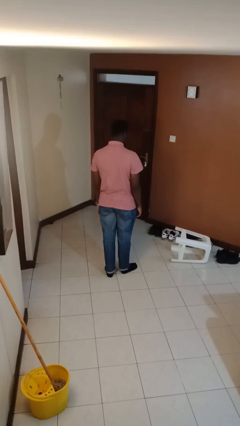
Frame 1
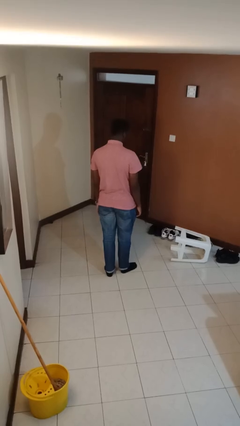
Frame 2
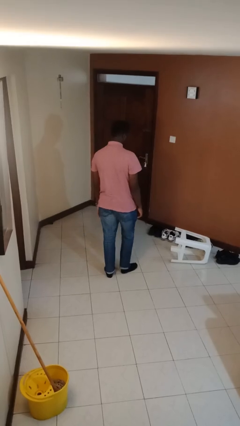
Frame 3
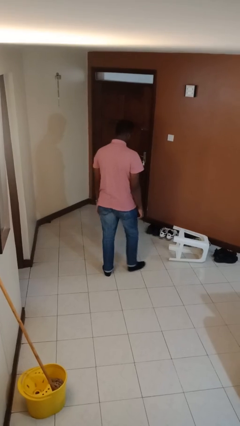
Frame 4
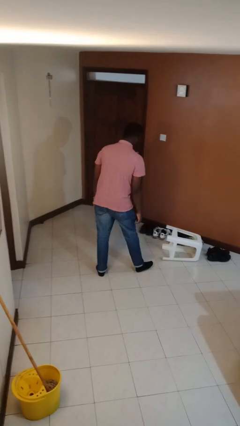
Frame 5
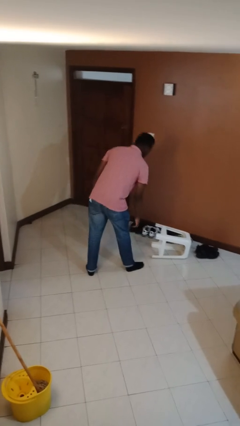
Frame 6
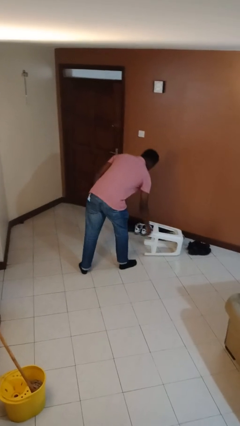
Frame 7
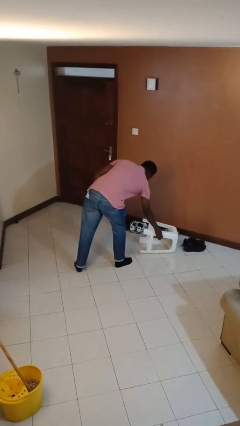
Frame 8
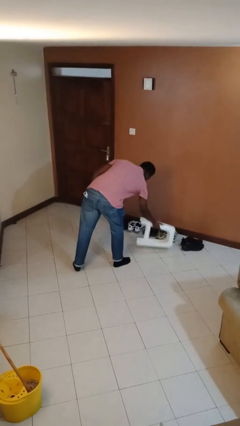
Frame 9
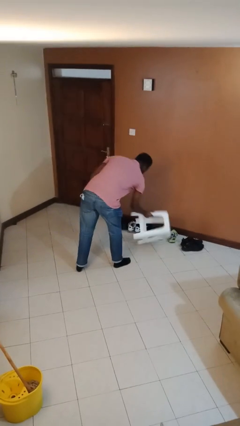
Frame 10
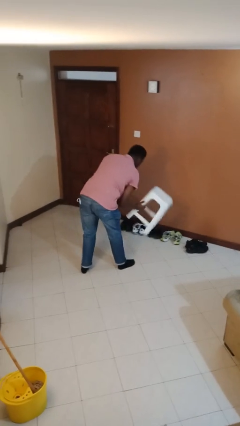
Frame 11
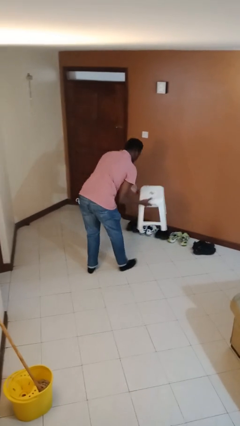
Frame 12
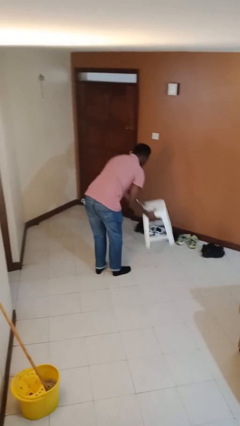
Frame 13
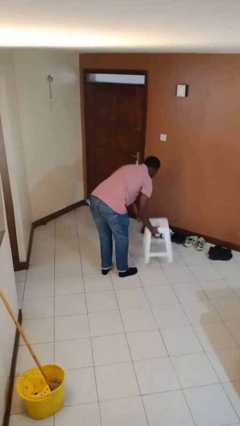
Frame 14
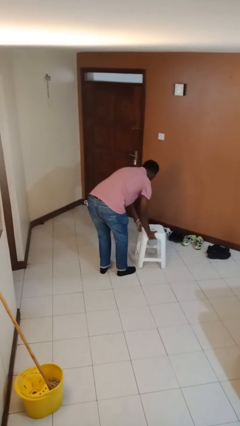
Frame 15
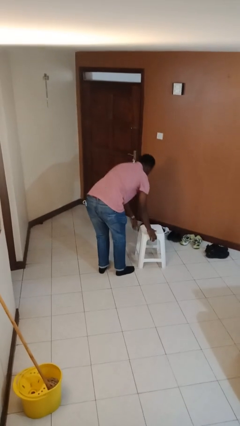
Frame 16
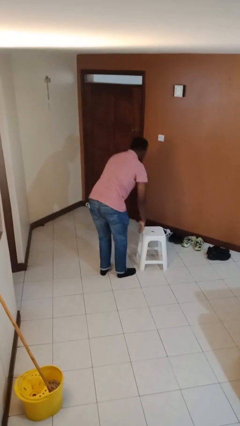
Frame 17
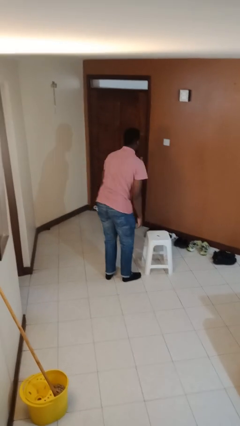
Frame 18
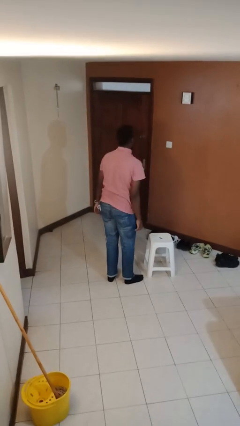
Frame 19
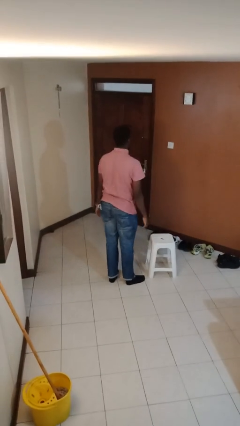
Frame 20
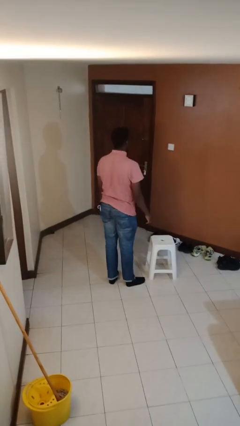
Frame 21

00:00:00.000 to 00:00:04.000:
person sets upright furniture

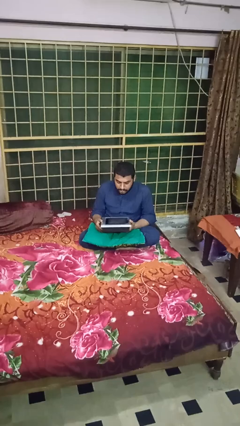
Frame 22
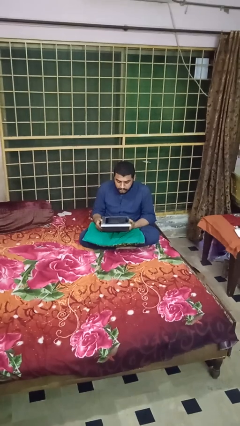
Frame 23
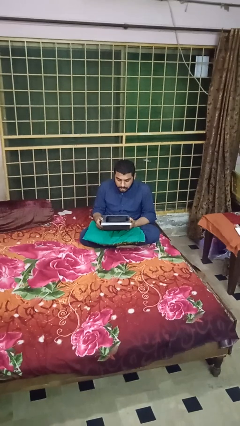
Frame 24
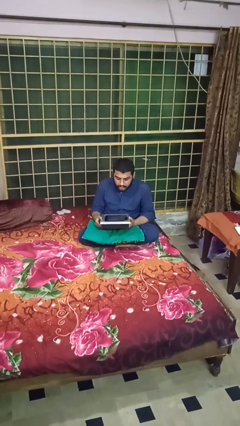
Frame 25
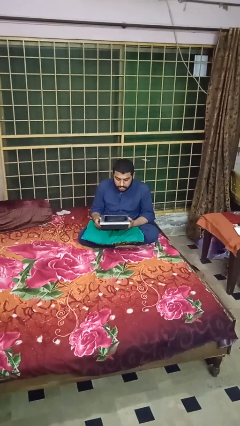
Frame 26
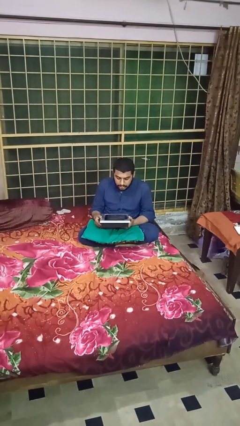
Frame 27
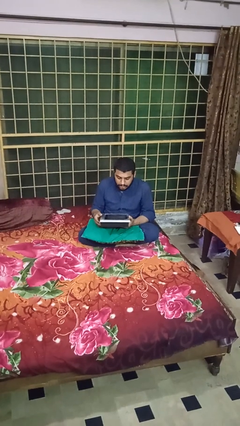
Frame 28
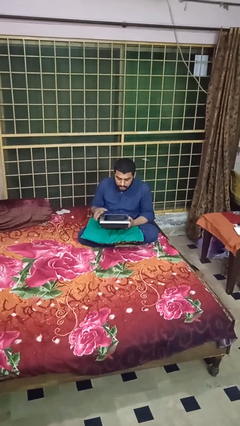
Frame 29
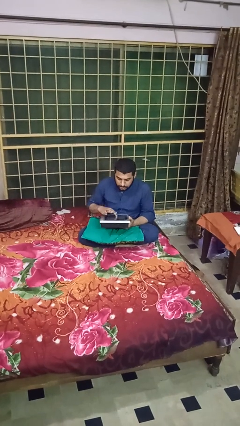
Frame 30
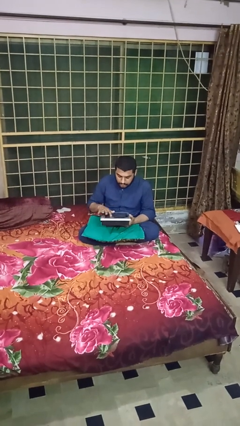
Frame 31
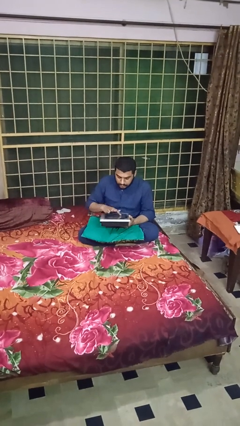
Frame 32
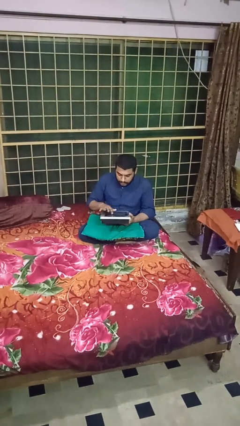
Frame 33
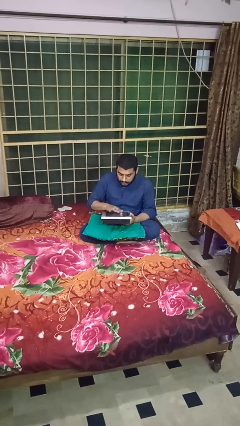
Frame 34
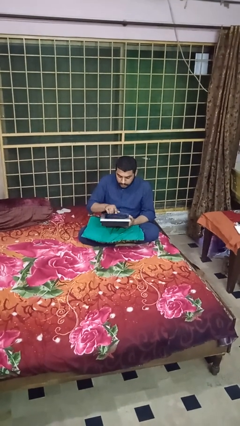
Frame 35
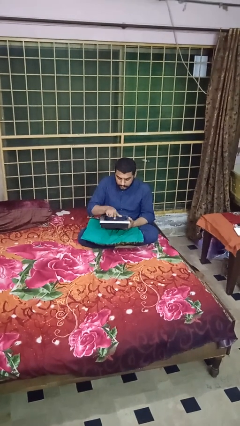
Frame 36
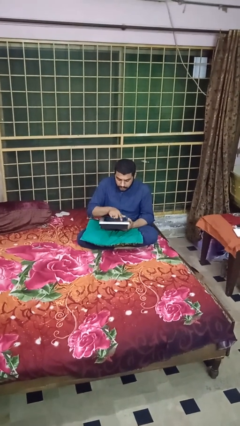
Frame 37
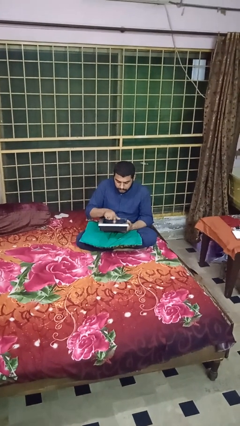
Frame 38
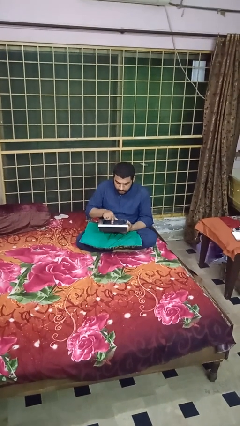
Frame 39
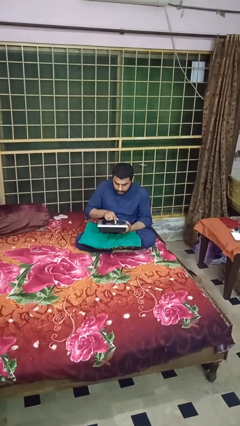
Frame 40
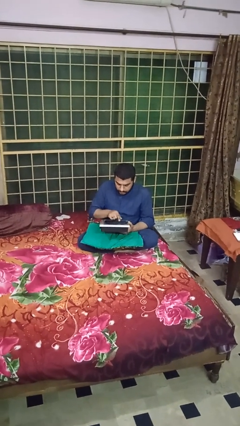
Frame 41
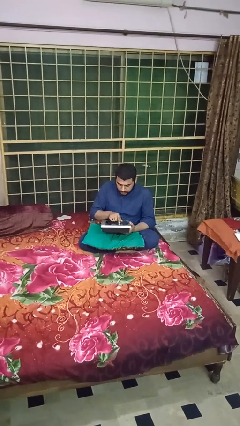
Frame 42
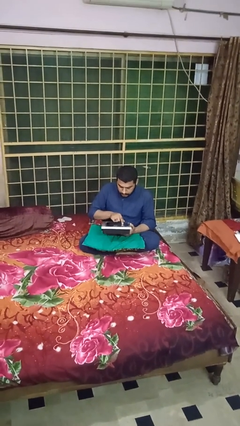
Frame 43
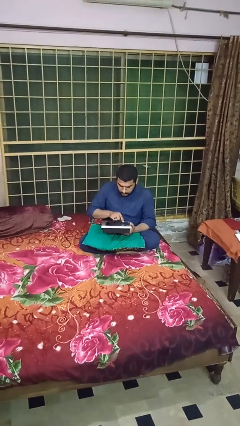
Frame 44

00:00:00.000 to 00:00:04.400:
person interacts with tablet

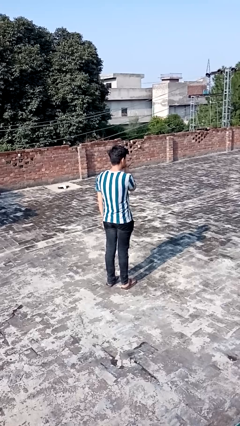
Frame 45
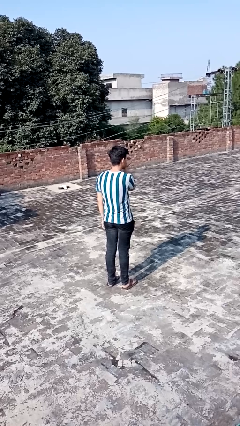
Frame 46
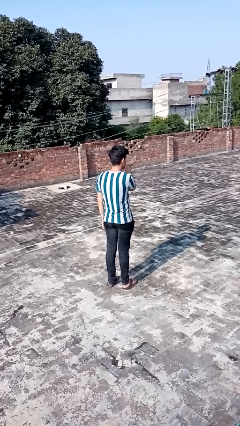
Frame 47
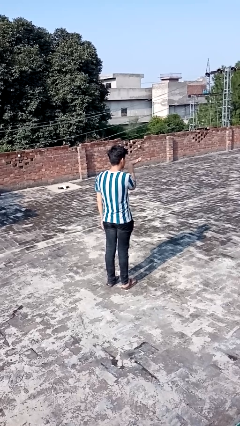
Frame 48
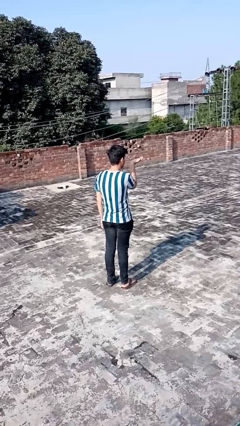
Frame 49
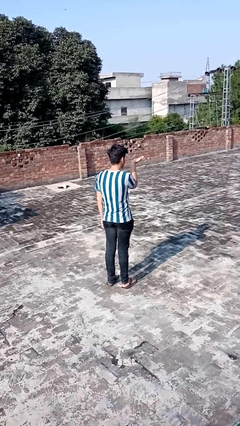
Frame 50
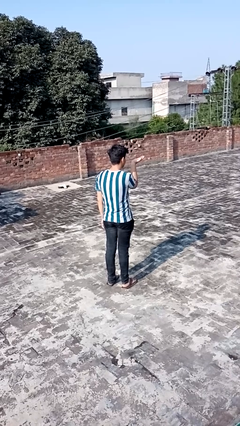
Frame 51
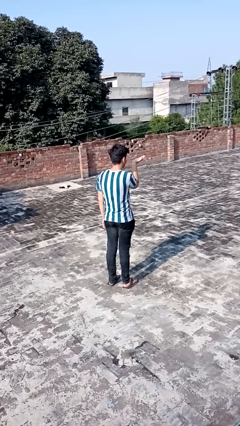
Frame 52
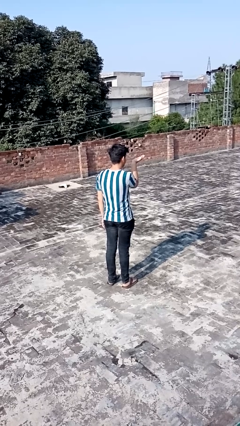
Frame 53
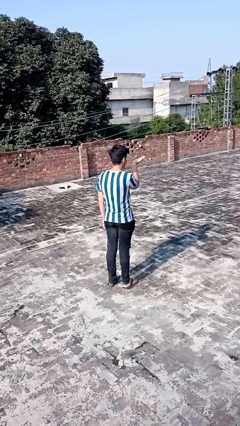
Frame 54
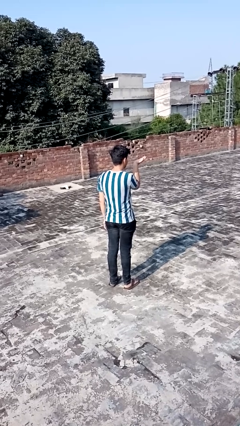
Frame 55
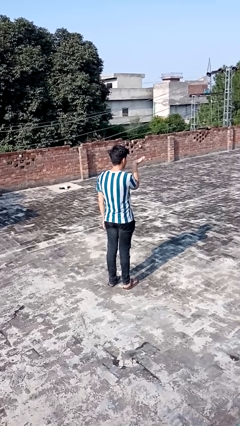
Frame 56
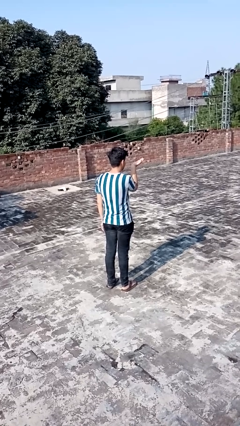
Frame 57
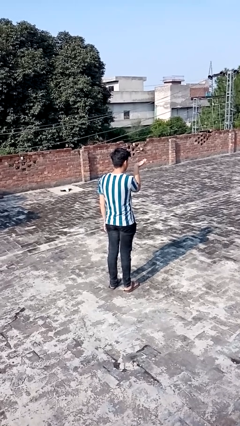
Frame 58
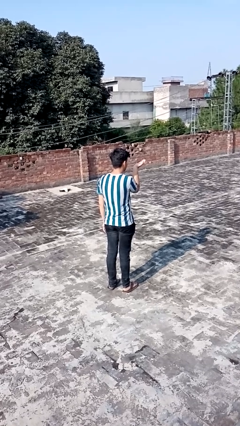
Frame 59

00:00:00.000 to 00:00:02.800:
person gestures blow kiss

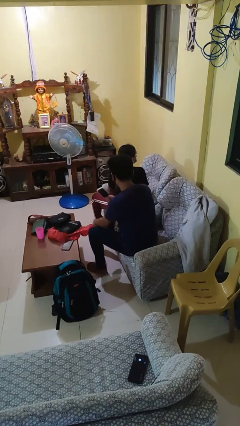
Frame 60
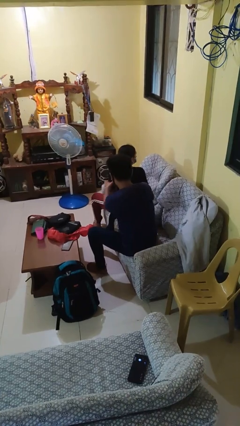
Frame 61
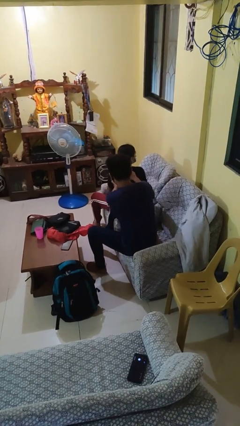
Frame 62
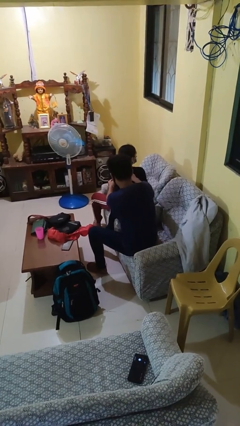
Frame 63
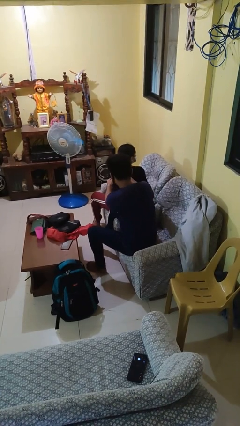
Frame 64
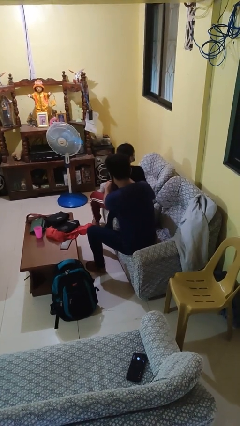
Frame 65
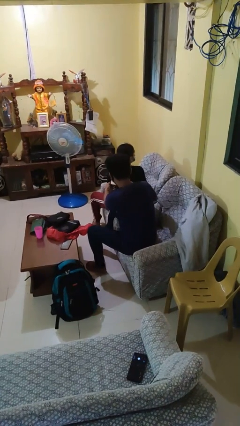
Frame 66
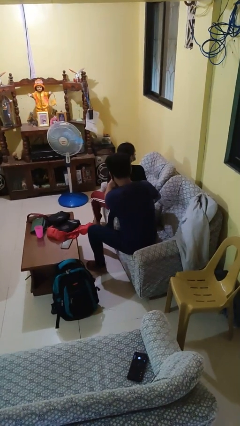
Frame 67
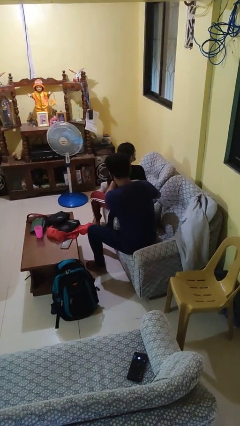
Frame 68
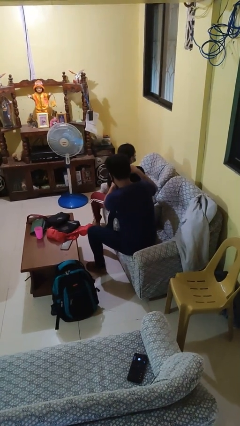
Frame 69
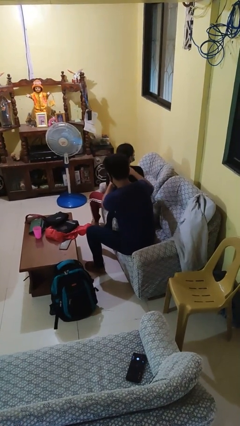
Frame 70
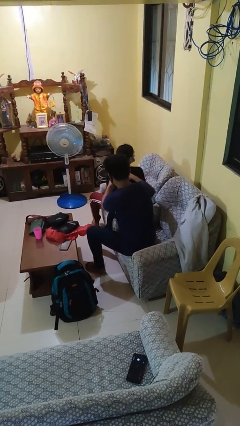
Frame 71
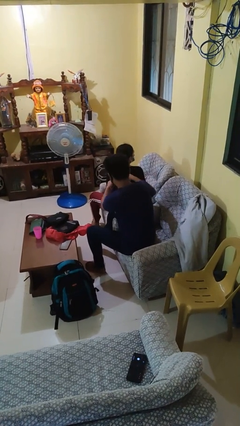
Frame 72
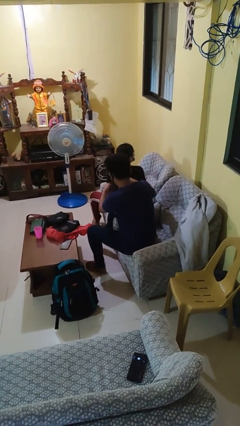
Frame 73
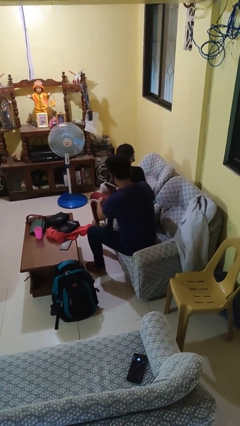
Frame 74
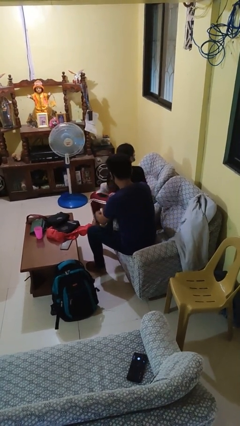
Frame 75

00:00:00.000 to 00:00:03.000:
person brushes hair of person

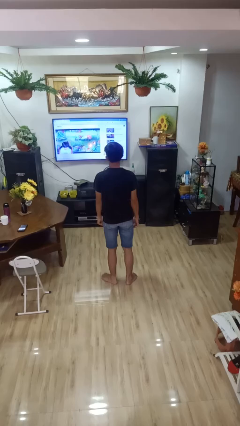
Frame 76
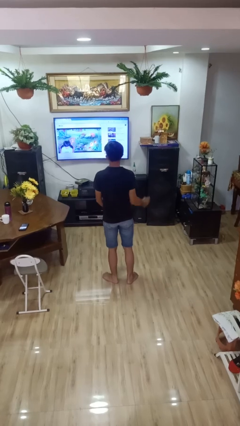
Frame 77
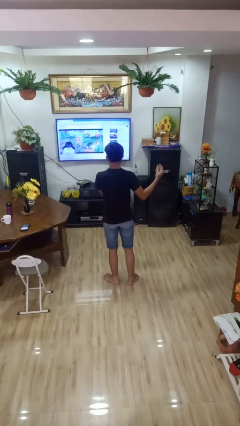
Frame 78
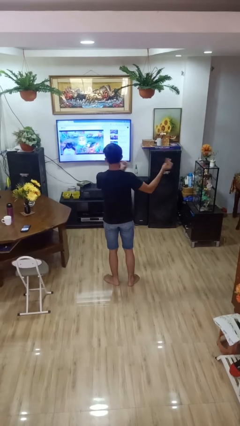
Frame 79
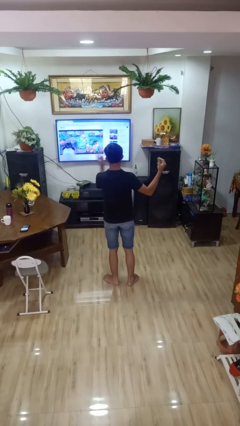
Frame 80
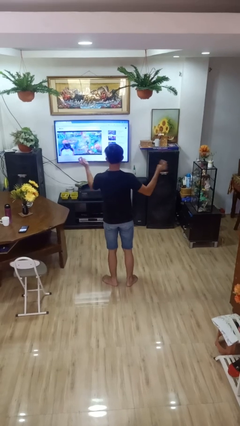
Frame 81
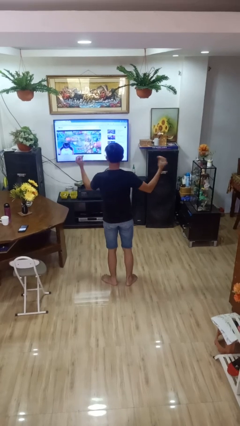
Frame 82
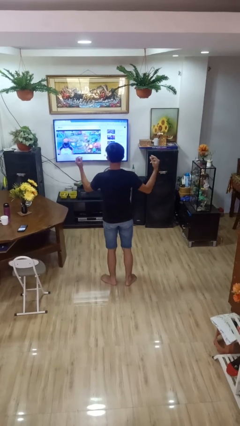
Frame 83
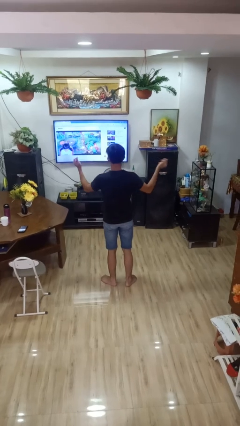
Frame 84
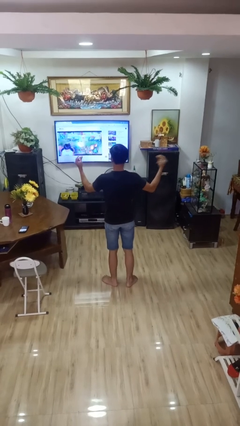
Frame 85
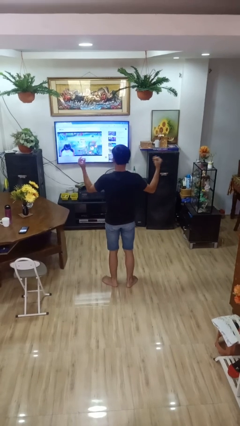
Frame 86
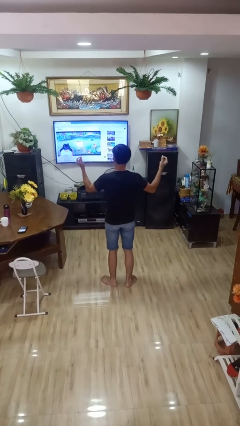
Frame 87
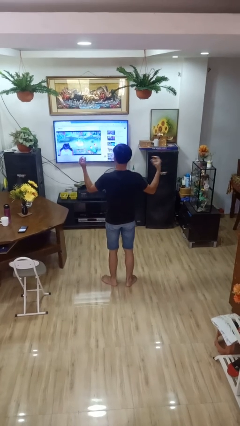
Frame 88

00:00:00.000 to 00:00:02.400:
person snaps fingers

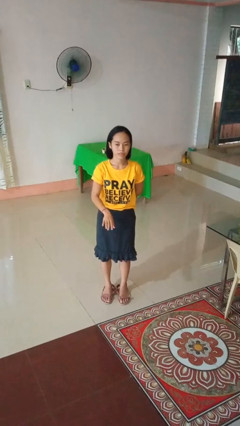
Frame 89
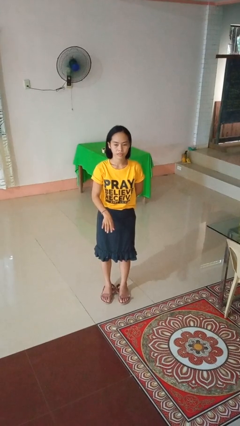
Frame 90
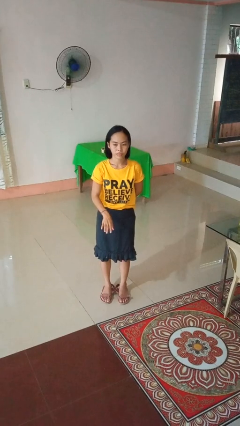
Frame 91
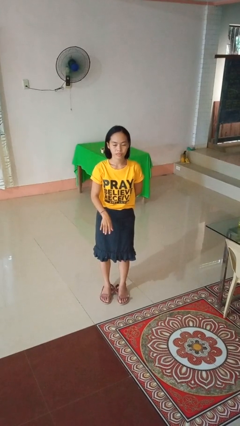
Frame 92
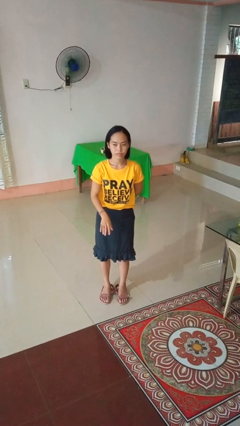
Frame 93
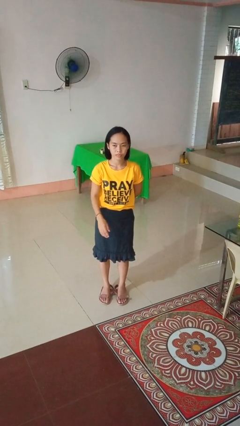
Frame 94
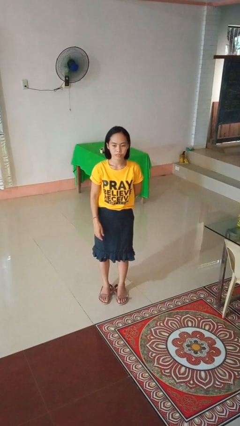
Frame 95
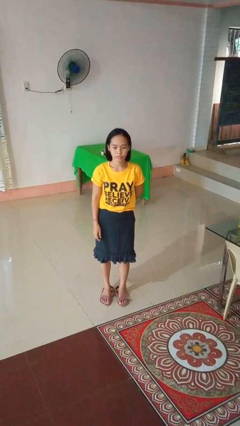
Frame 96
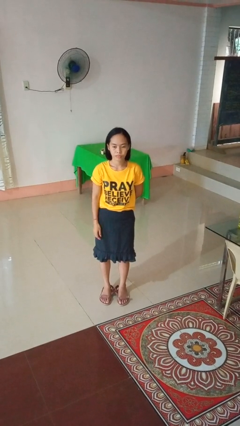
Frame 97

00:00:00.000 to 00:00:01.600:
person gestures swipe down
